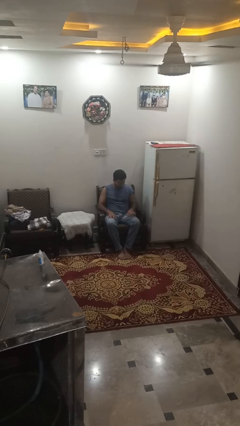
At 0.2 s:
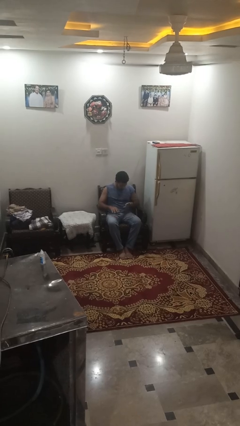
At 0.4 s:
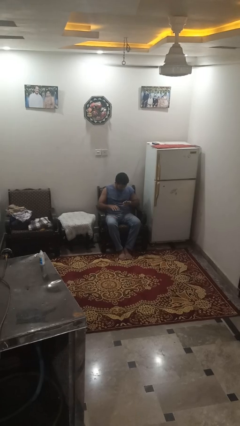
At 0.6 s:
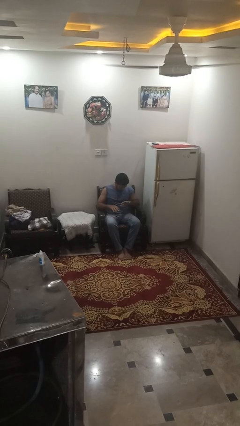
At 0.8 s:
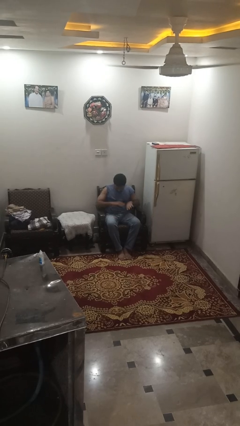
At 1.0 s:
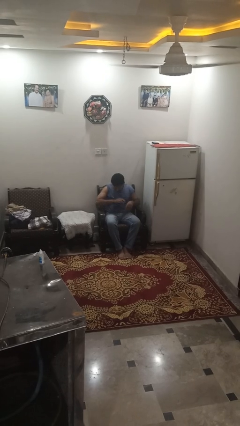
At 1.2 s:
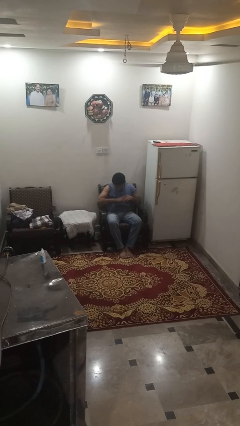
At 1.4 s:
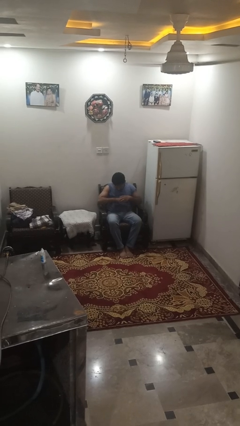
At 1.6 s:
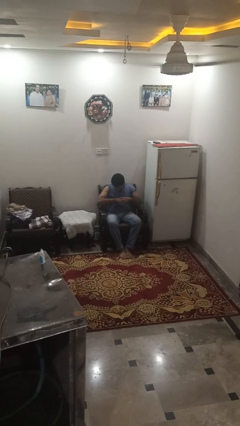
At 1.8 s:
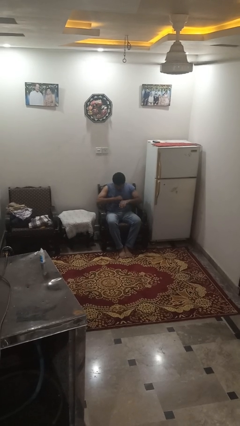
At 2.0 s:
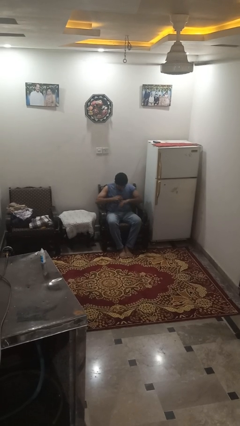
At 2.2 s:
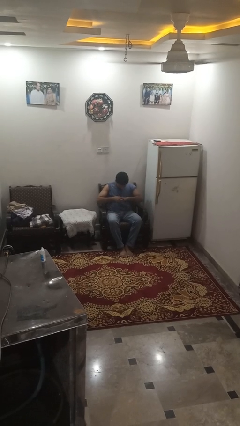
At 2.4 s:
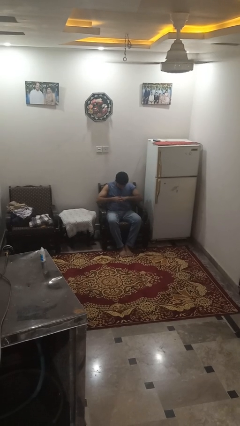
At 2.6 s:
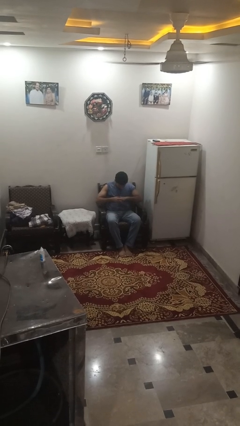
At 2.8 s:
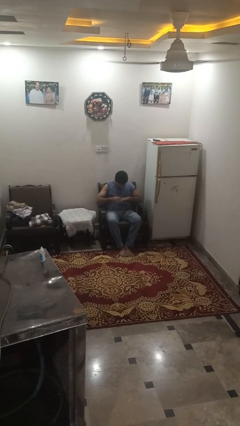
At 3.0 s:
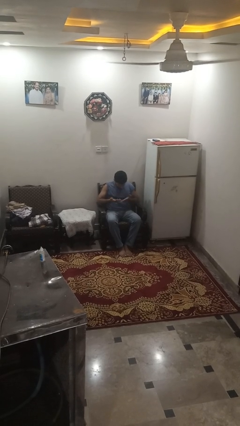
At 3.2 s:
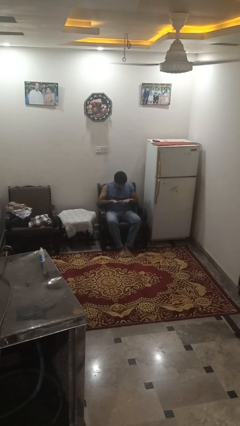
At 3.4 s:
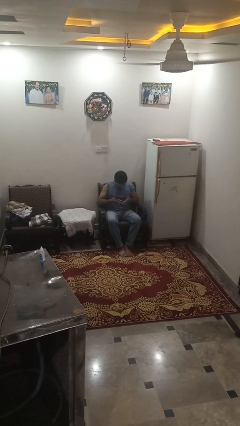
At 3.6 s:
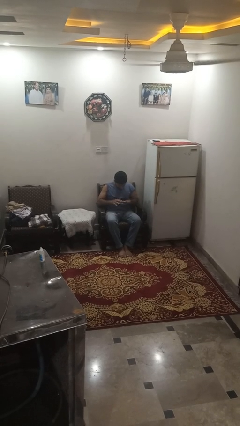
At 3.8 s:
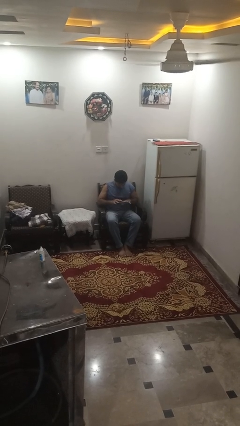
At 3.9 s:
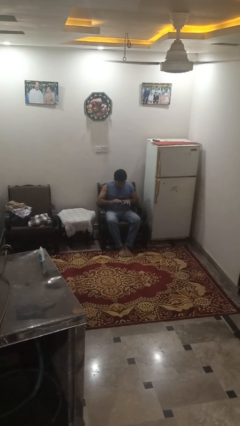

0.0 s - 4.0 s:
person looks at hands in lap

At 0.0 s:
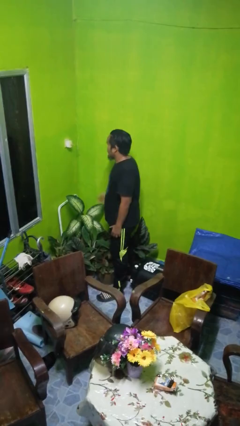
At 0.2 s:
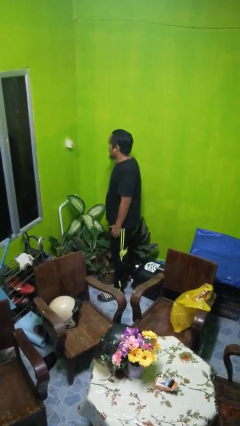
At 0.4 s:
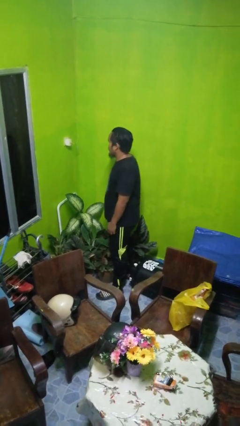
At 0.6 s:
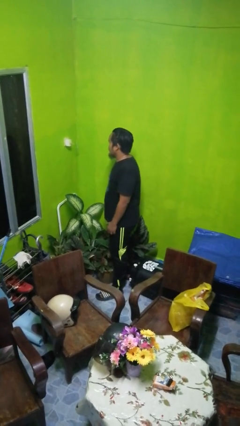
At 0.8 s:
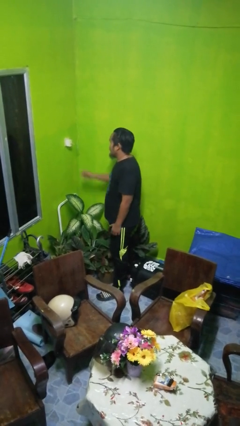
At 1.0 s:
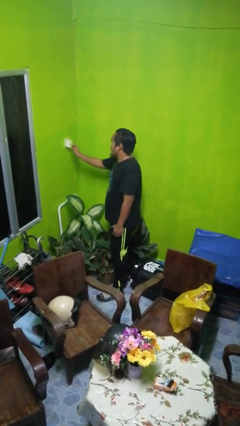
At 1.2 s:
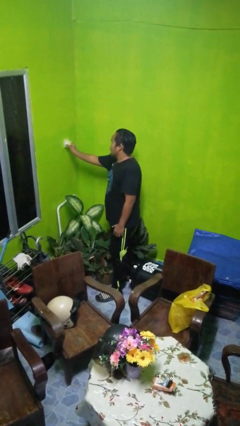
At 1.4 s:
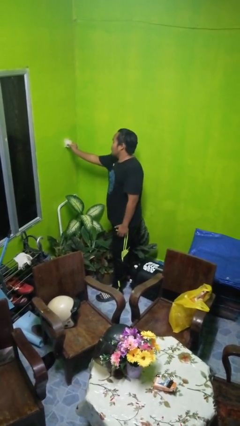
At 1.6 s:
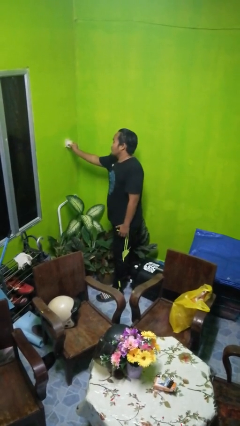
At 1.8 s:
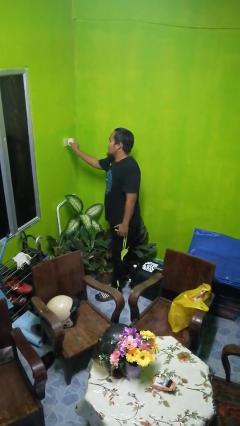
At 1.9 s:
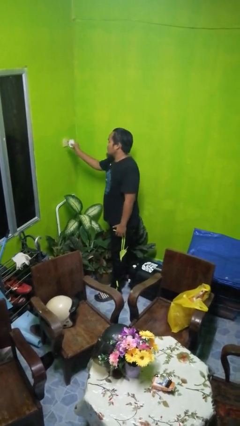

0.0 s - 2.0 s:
person unplugs from electrical socket

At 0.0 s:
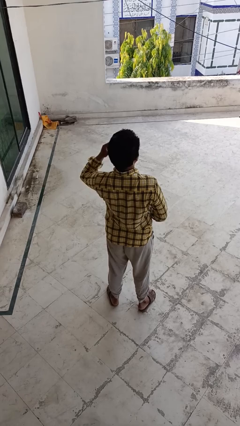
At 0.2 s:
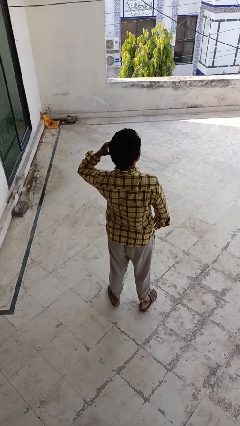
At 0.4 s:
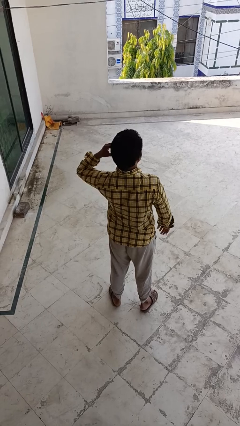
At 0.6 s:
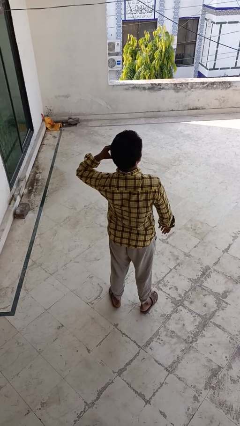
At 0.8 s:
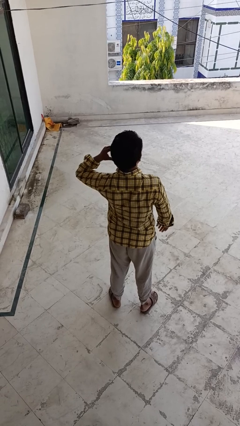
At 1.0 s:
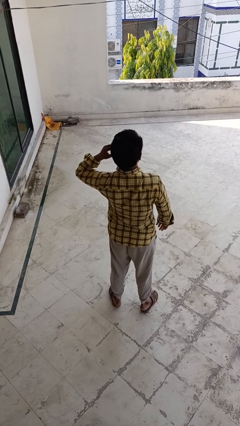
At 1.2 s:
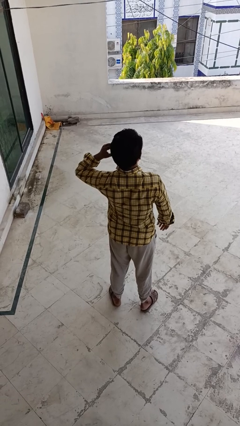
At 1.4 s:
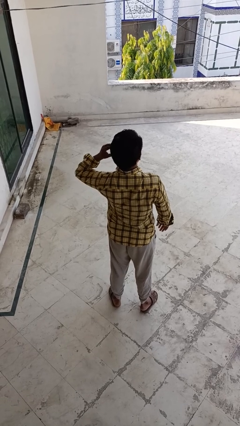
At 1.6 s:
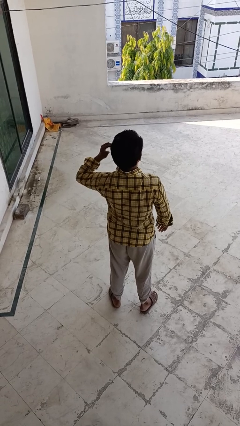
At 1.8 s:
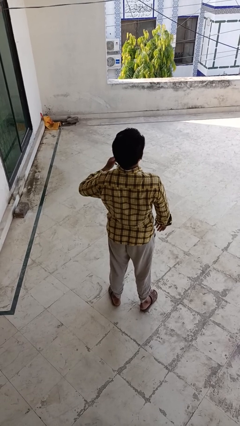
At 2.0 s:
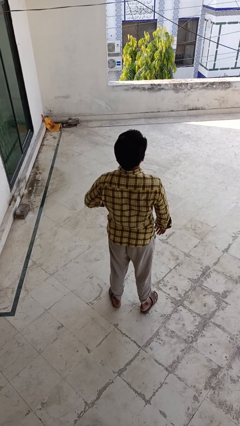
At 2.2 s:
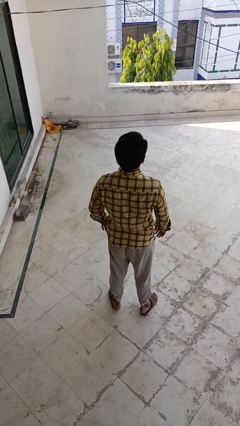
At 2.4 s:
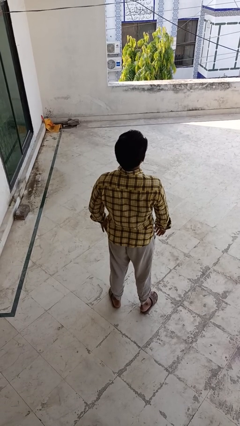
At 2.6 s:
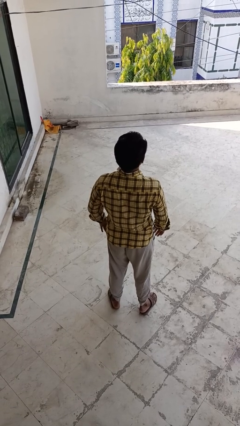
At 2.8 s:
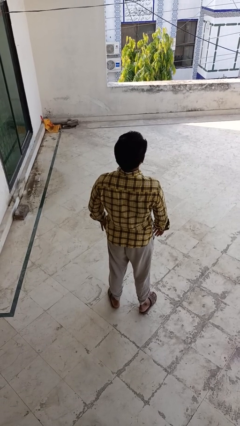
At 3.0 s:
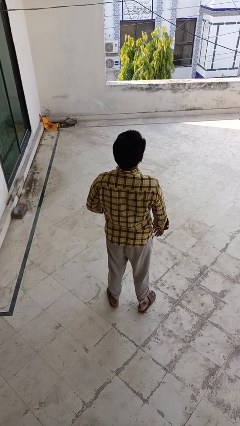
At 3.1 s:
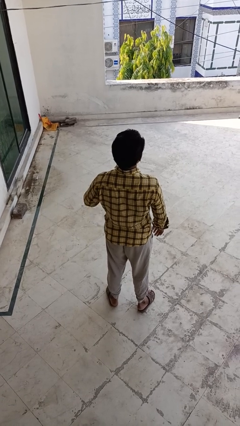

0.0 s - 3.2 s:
person puts on earrings

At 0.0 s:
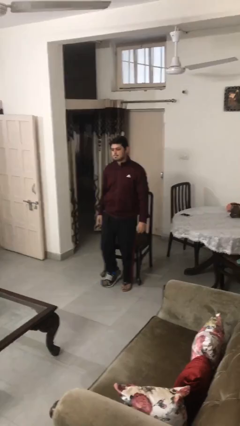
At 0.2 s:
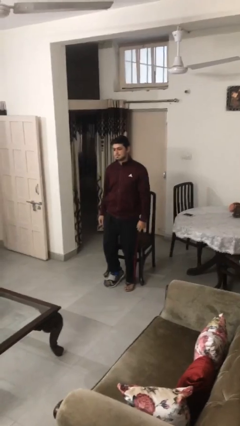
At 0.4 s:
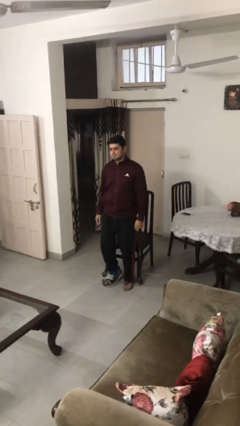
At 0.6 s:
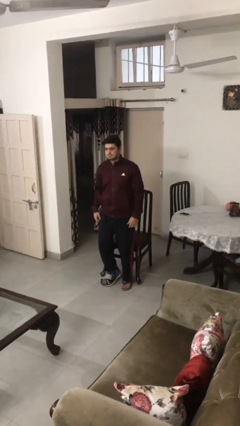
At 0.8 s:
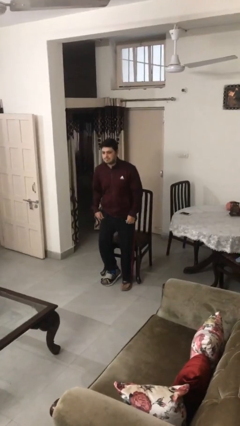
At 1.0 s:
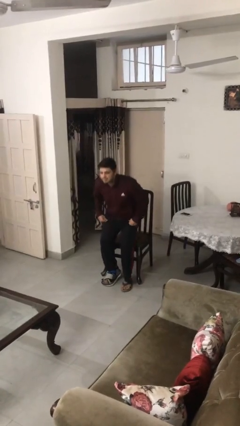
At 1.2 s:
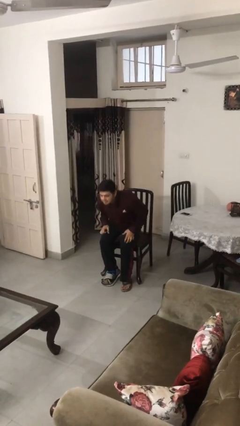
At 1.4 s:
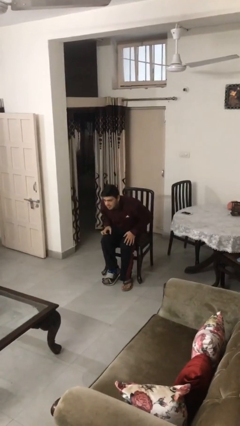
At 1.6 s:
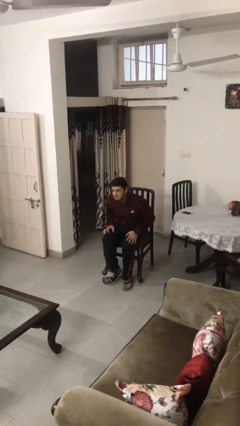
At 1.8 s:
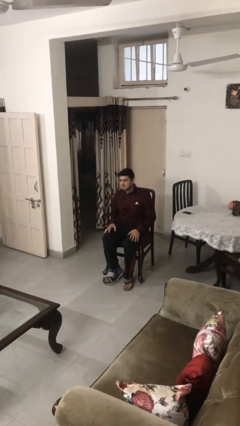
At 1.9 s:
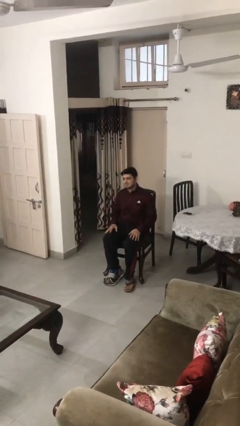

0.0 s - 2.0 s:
person sits down

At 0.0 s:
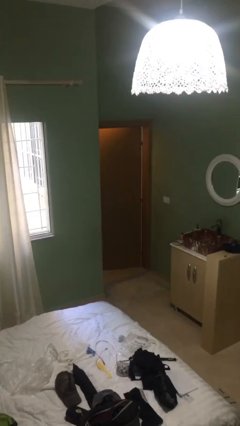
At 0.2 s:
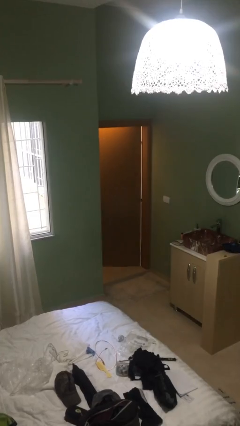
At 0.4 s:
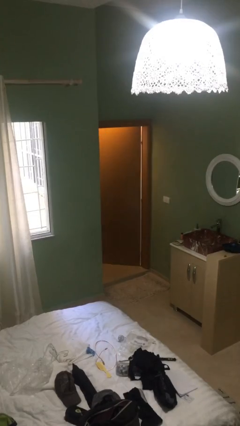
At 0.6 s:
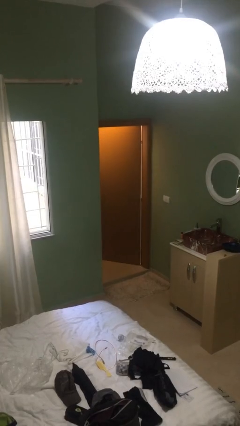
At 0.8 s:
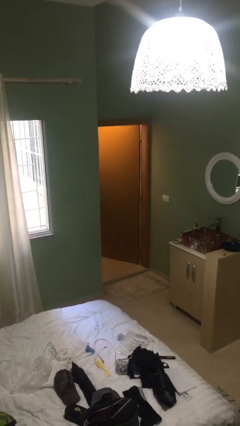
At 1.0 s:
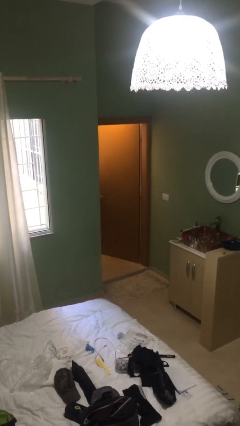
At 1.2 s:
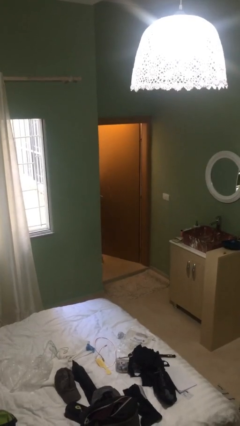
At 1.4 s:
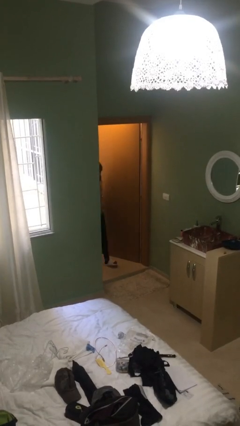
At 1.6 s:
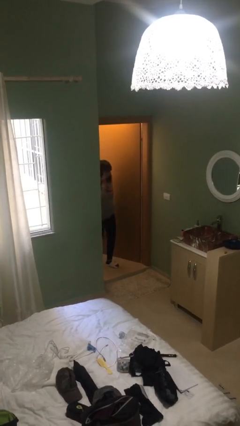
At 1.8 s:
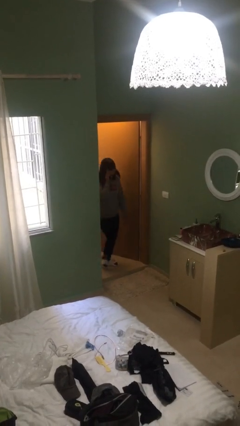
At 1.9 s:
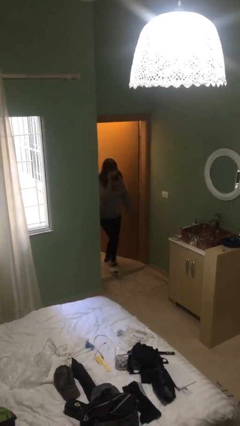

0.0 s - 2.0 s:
person opens facility door

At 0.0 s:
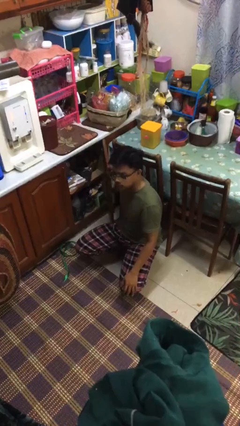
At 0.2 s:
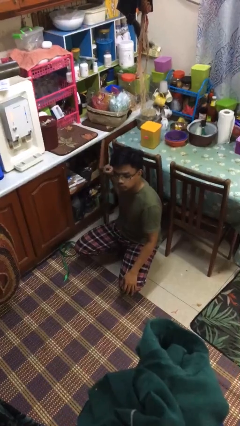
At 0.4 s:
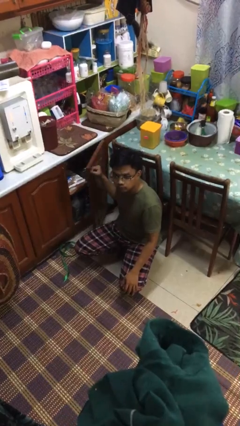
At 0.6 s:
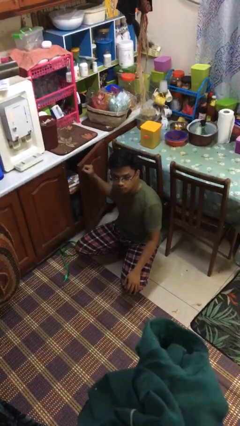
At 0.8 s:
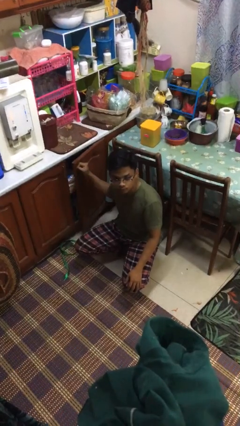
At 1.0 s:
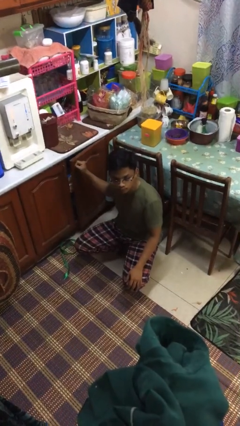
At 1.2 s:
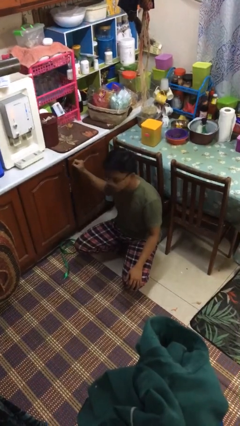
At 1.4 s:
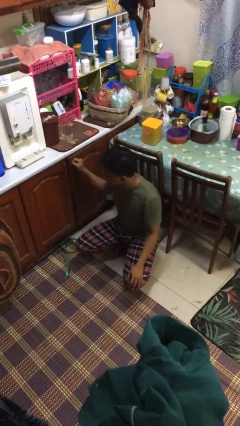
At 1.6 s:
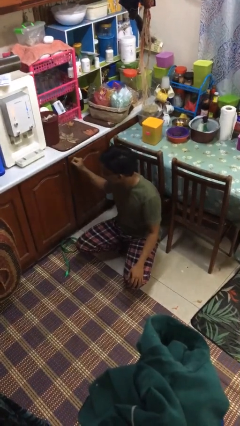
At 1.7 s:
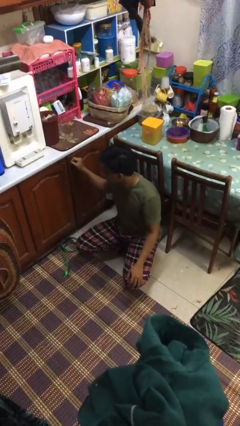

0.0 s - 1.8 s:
person closes kitchen drawer

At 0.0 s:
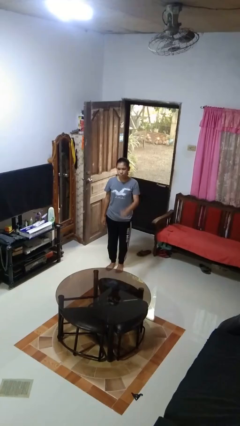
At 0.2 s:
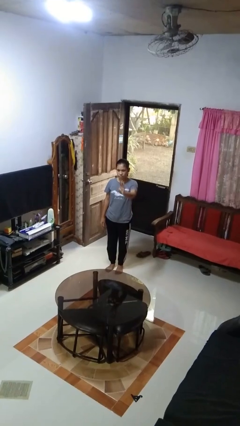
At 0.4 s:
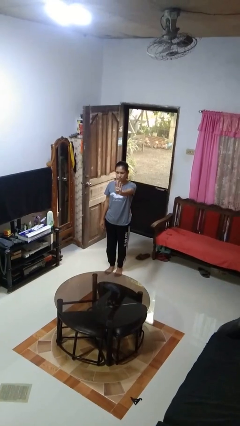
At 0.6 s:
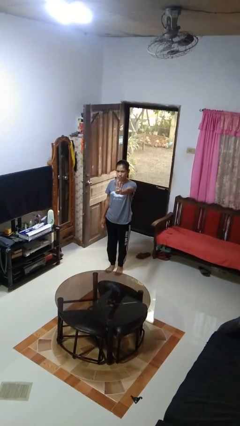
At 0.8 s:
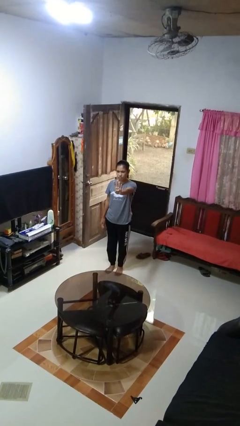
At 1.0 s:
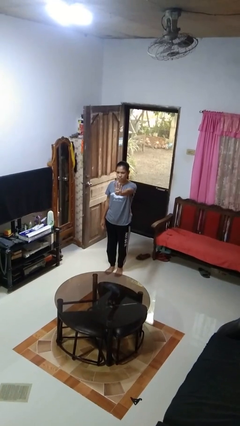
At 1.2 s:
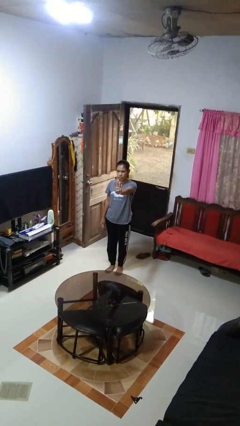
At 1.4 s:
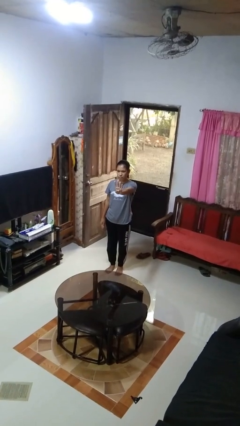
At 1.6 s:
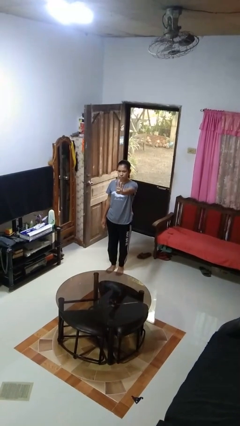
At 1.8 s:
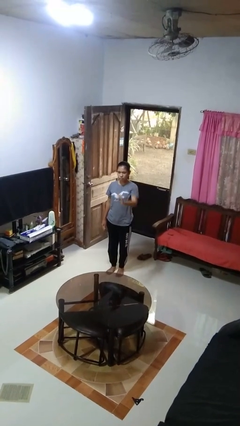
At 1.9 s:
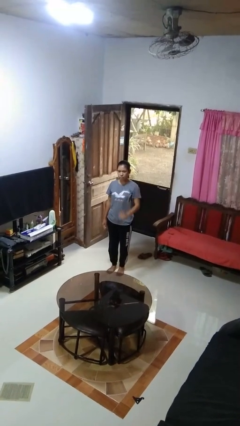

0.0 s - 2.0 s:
person gestures number four
